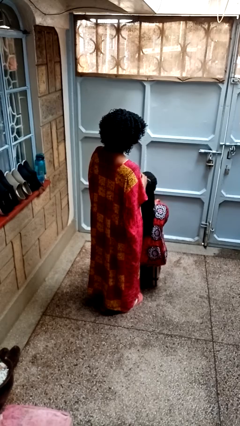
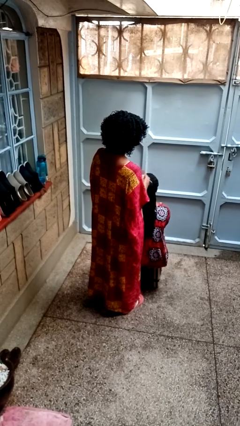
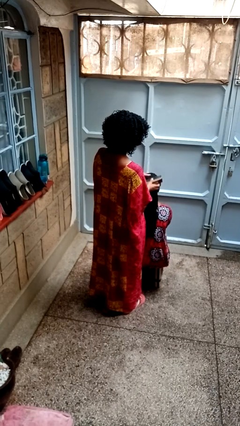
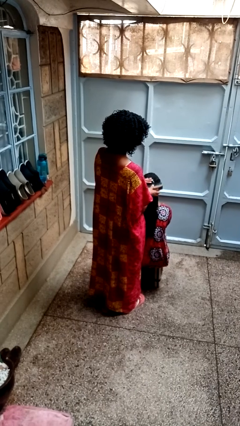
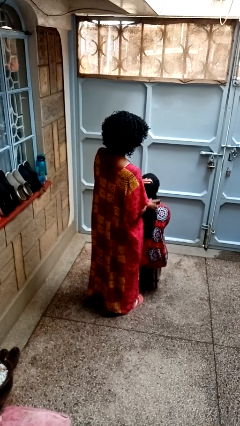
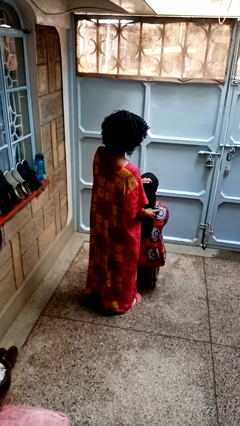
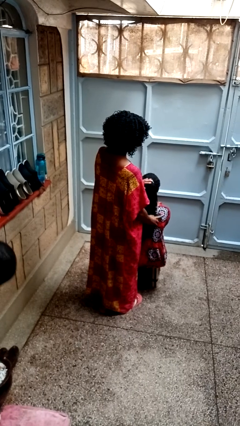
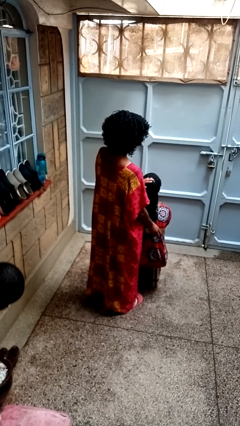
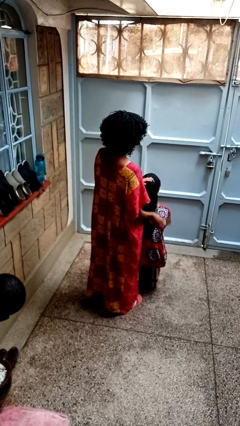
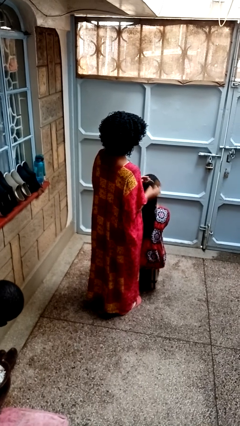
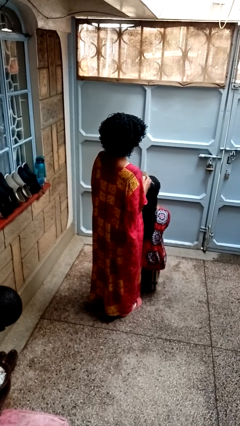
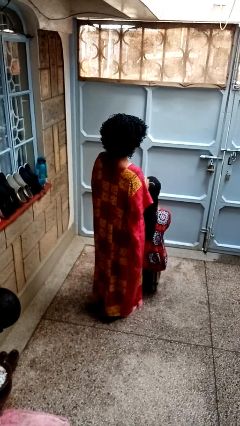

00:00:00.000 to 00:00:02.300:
person brushes hair of person

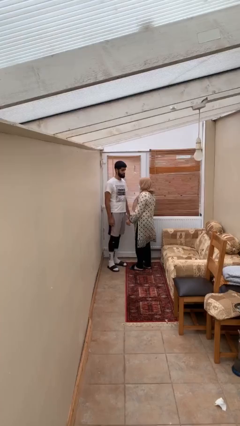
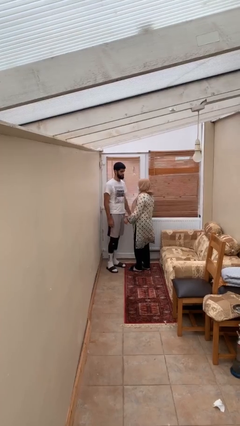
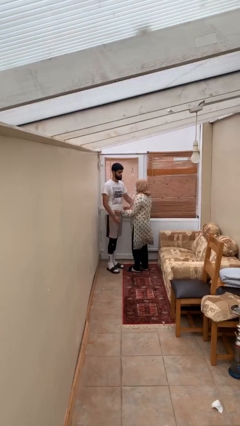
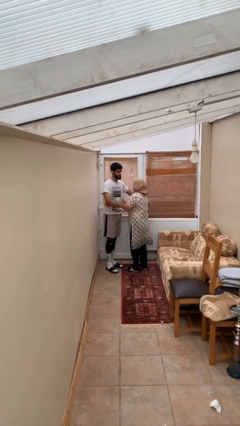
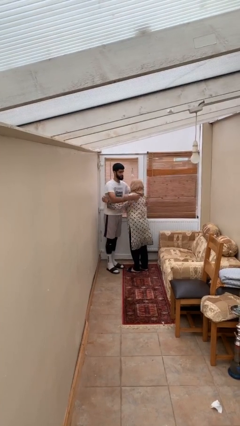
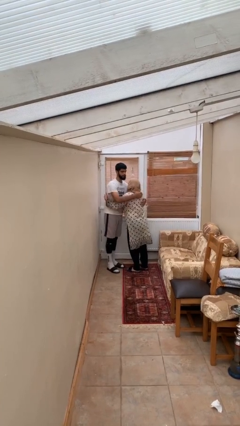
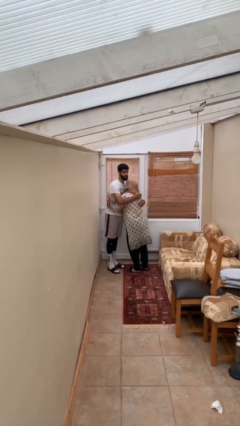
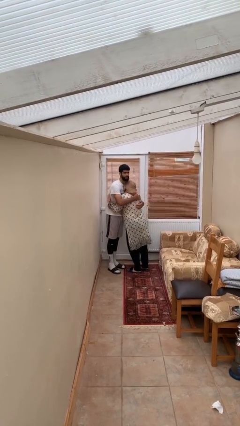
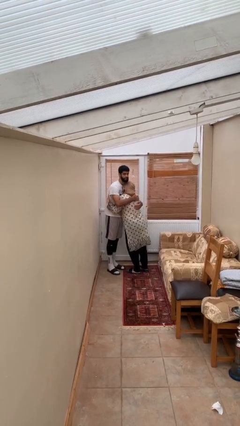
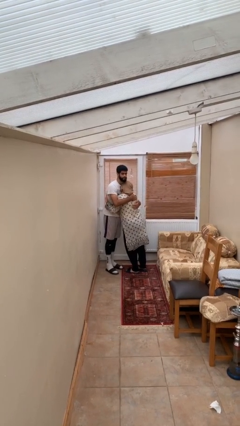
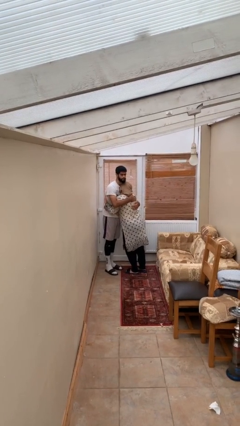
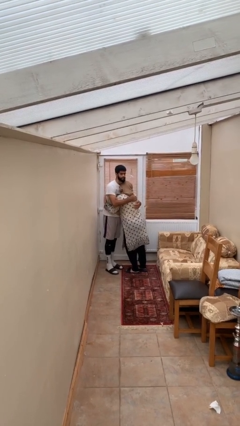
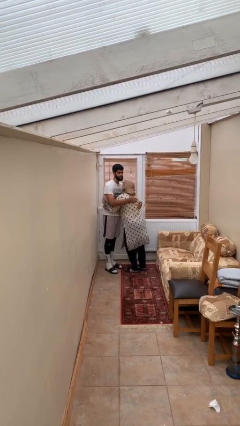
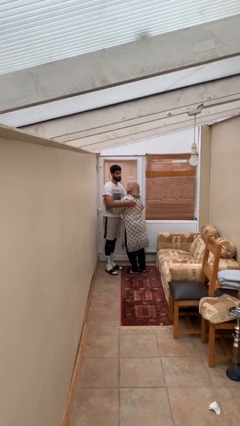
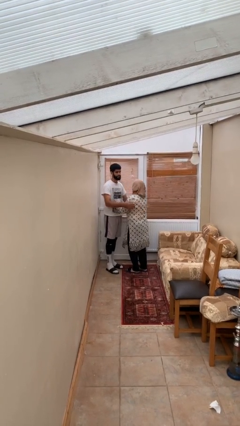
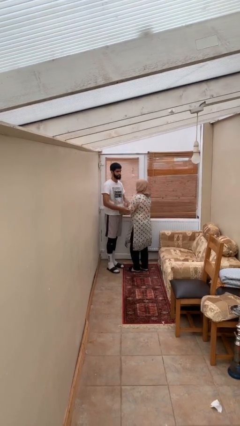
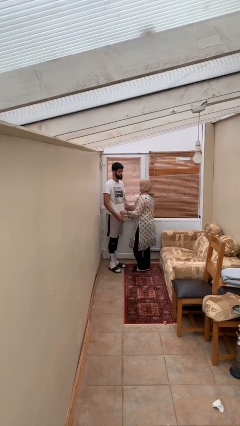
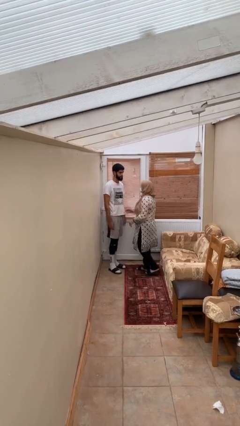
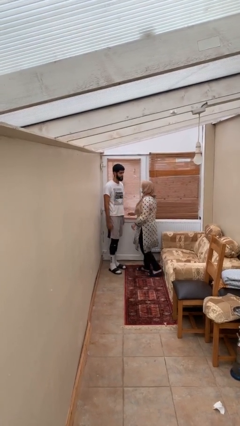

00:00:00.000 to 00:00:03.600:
person embraces person

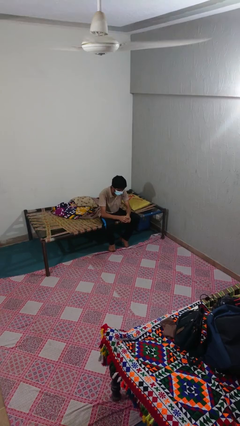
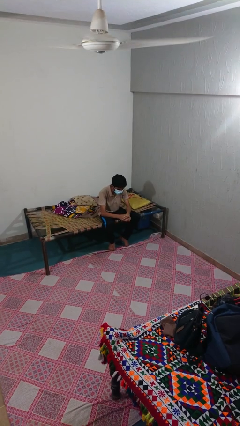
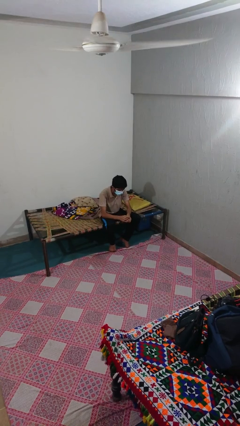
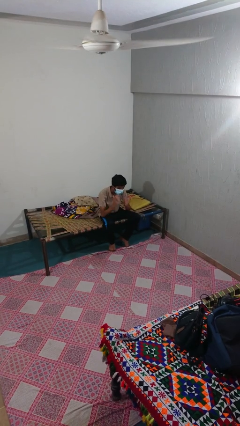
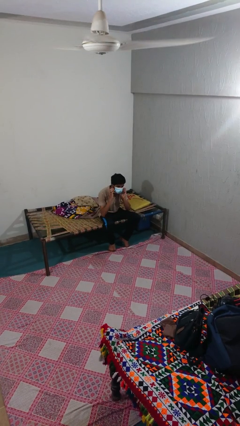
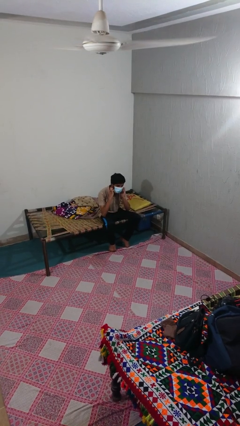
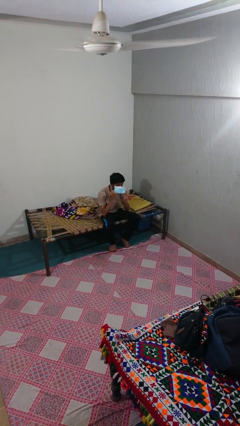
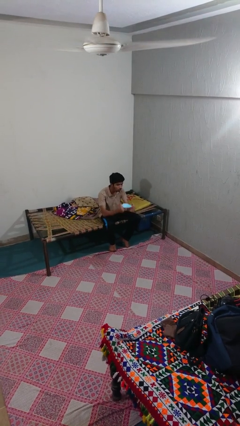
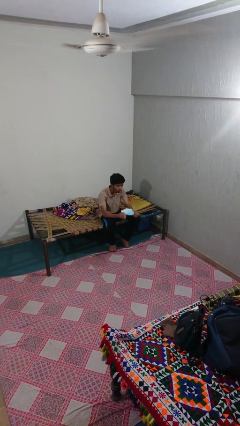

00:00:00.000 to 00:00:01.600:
person takes off facemask

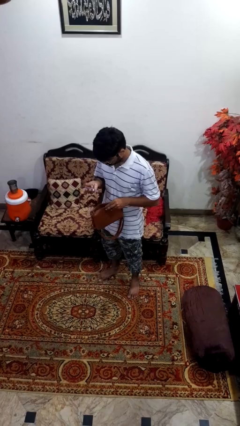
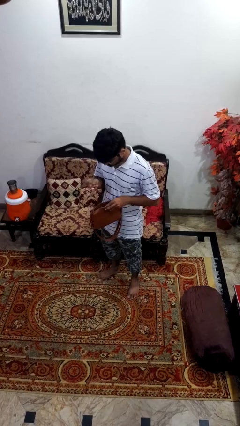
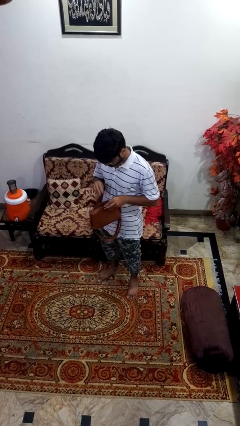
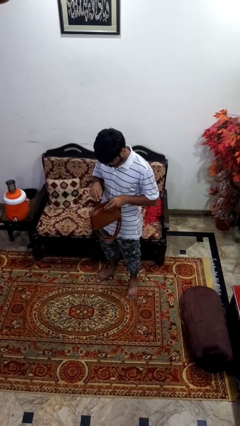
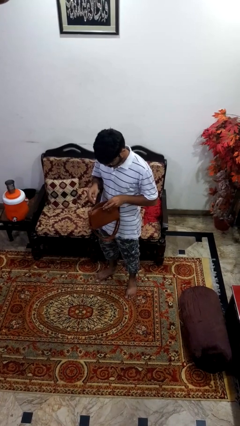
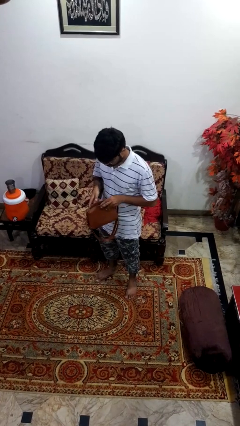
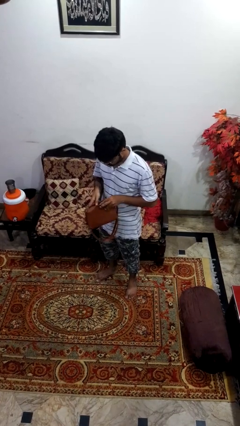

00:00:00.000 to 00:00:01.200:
person puts object into purse

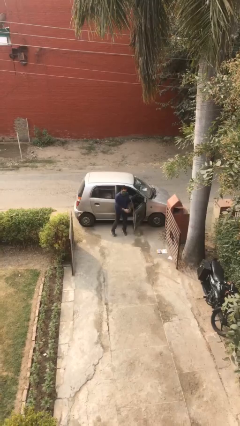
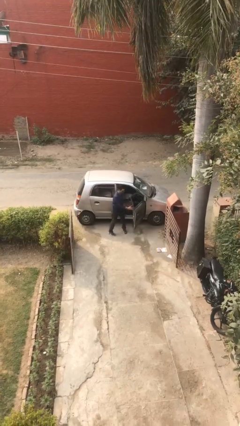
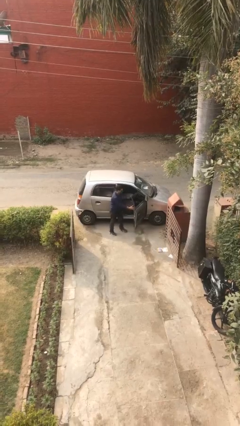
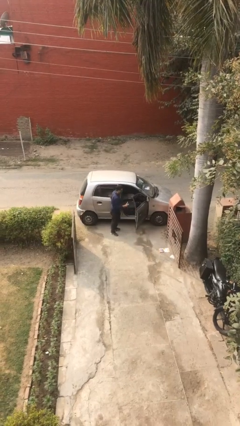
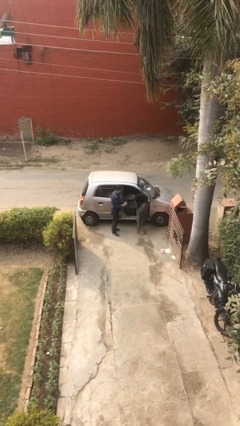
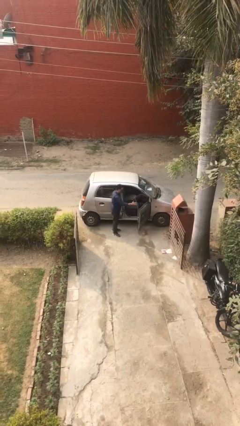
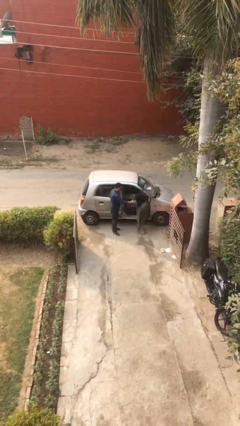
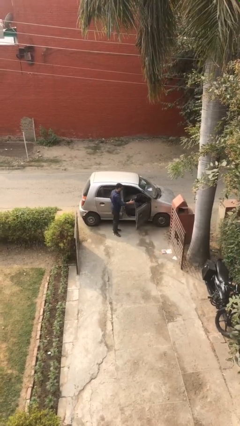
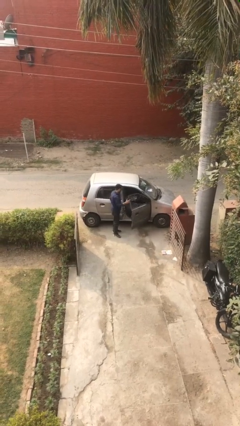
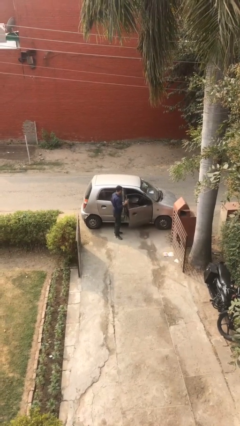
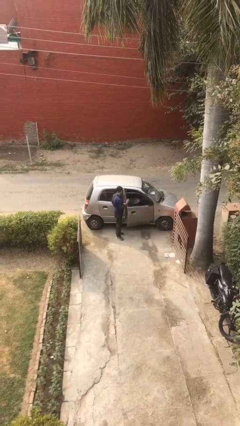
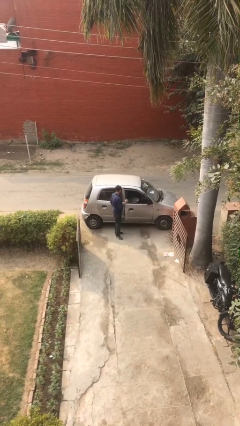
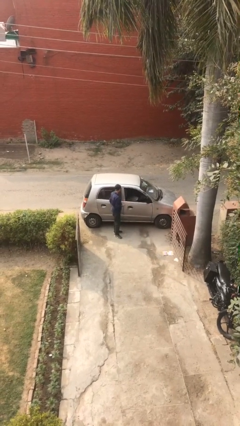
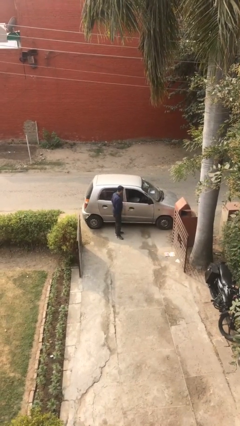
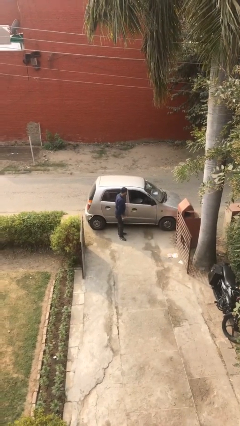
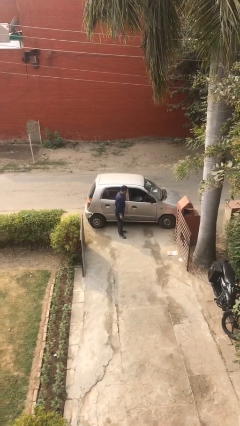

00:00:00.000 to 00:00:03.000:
person closes car door

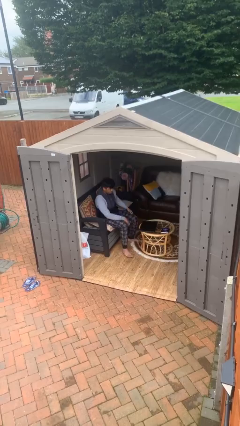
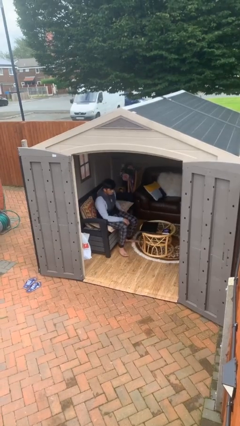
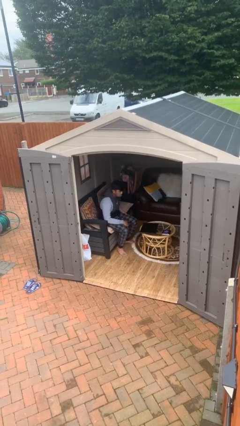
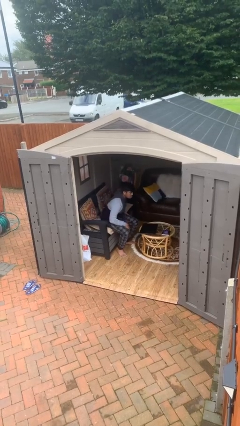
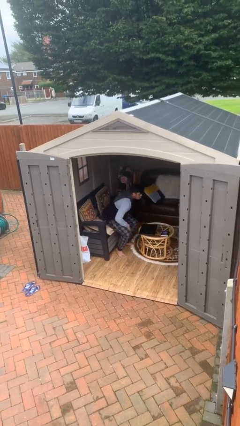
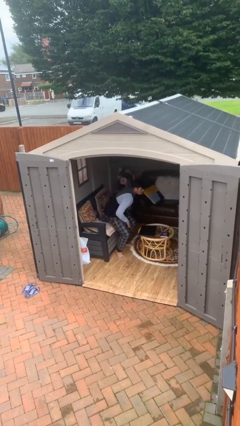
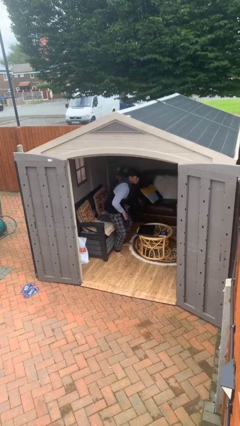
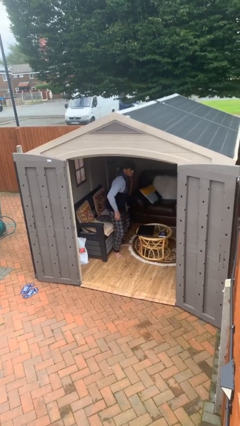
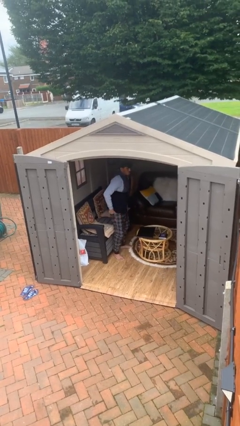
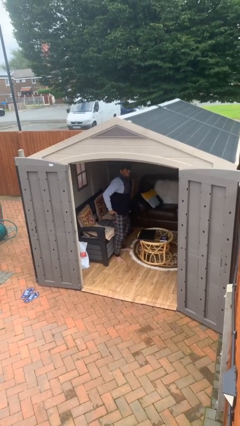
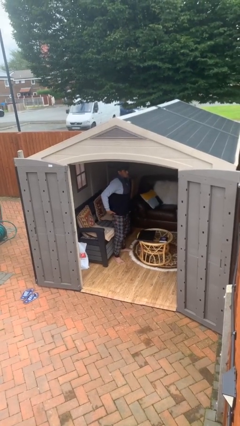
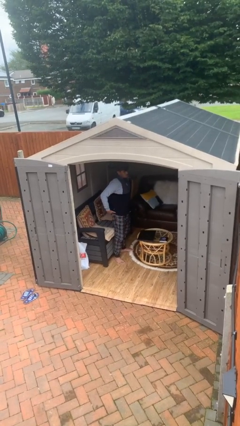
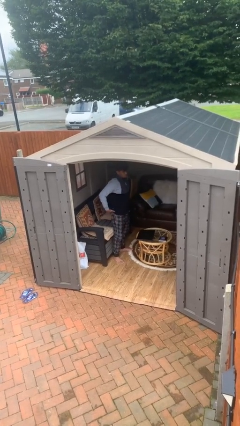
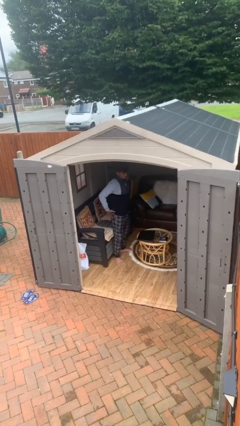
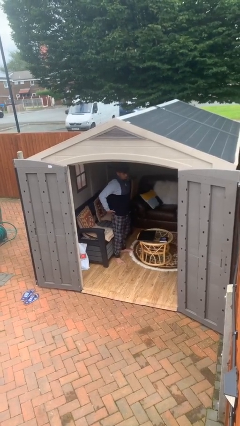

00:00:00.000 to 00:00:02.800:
person stands up

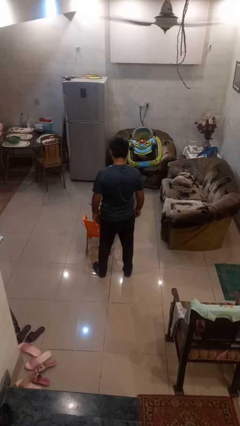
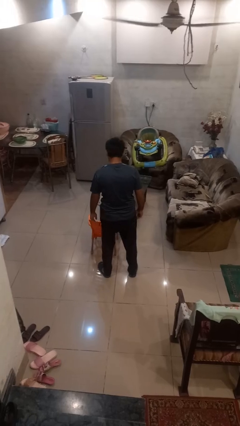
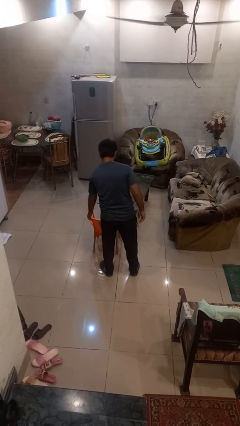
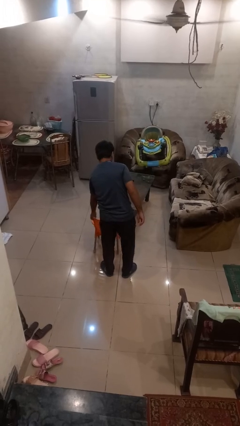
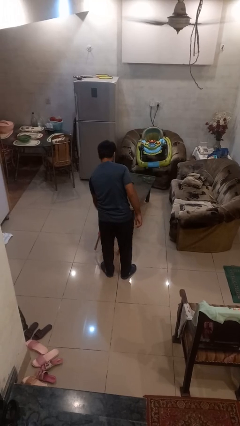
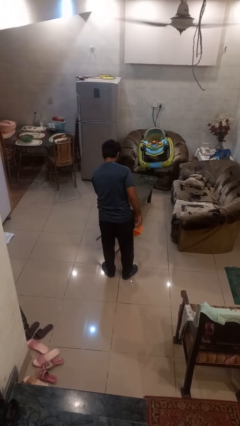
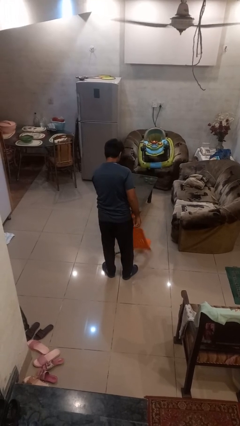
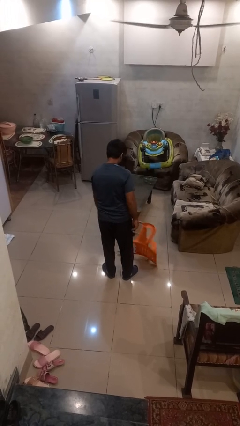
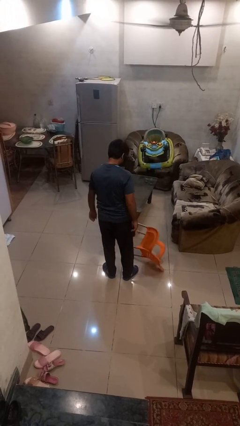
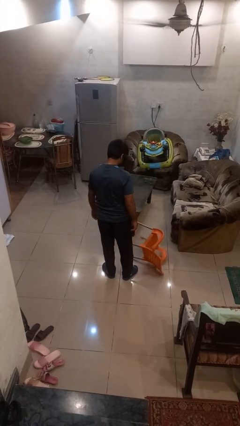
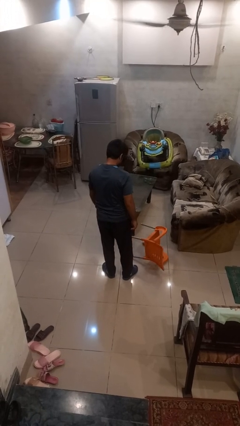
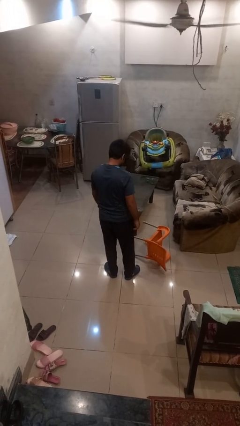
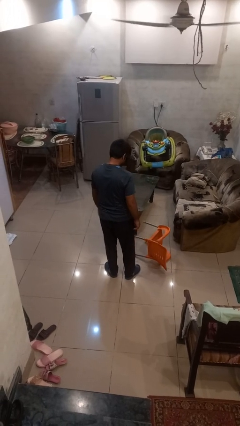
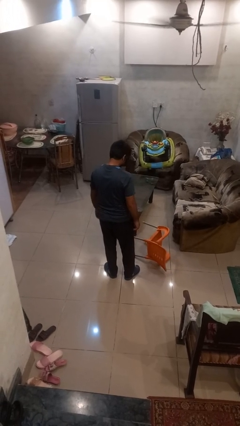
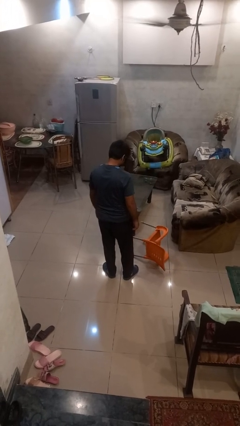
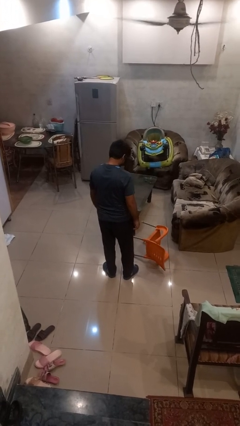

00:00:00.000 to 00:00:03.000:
person knocks over furniture
